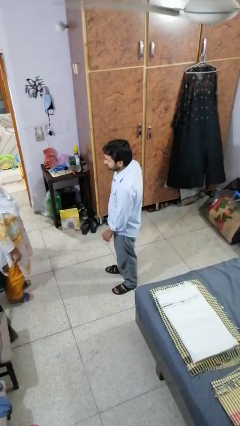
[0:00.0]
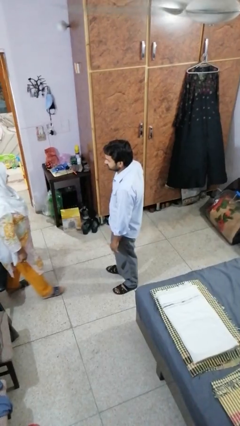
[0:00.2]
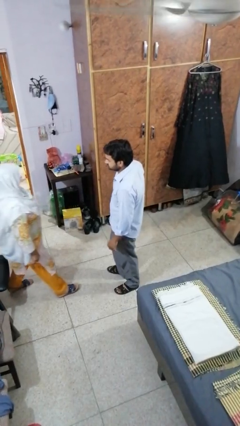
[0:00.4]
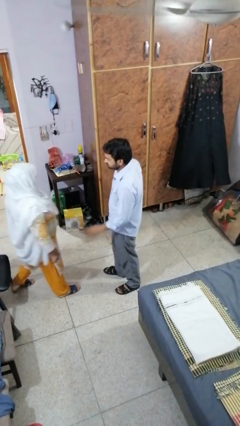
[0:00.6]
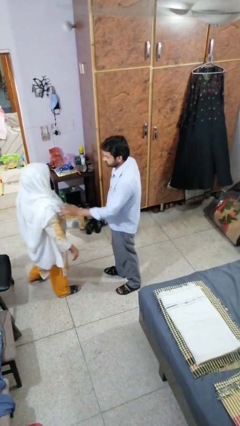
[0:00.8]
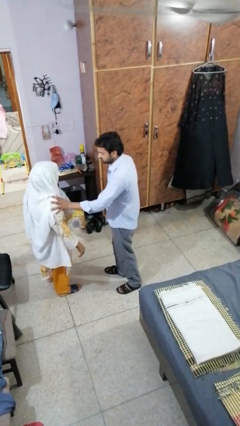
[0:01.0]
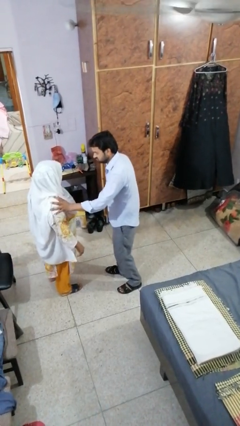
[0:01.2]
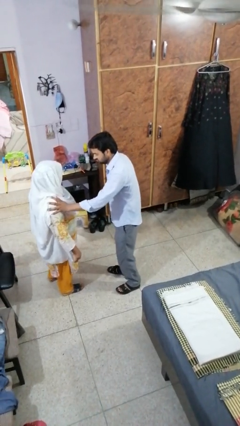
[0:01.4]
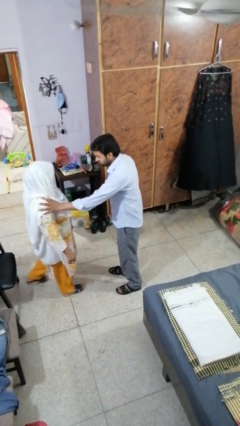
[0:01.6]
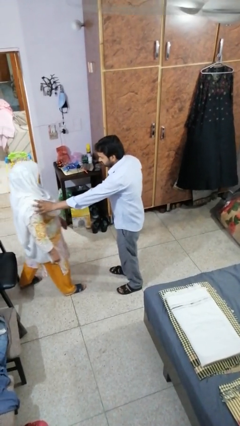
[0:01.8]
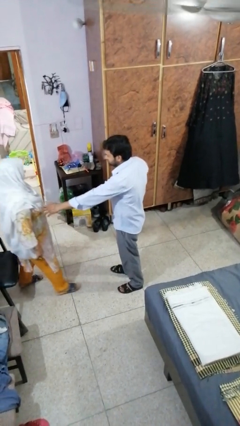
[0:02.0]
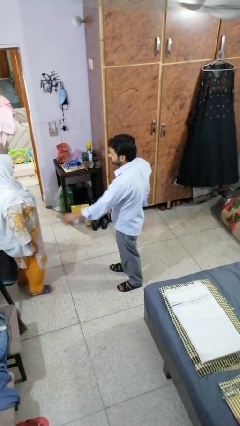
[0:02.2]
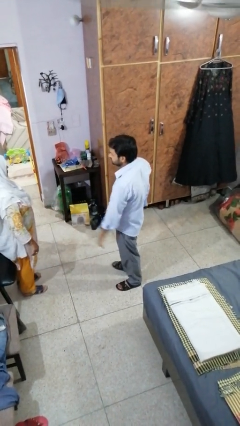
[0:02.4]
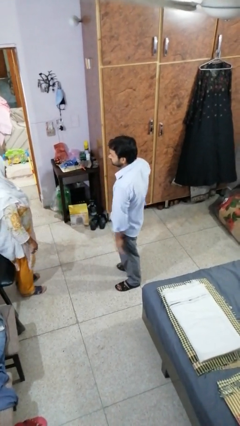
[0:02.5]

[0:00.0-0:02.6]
person shoves person

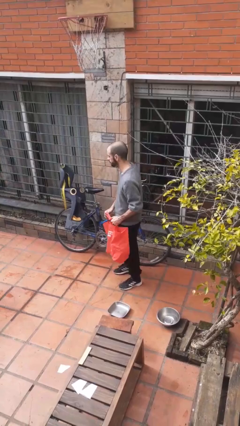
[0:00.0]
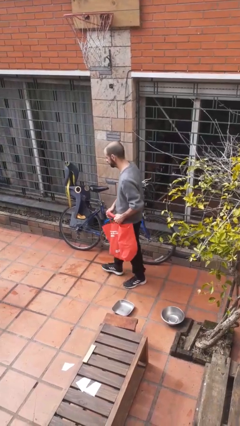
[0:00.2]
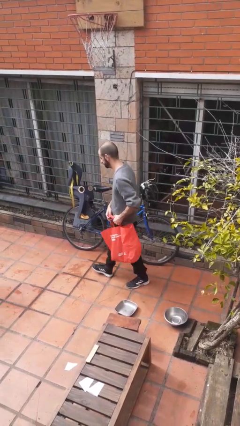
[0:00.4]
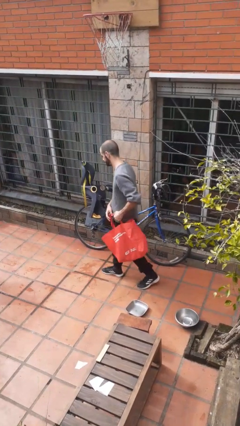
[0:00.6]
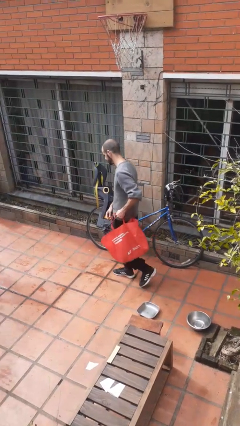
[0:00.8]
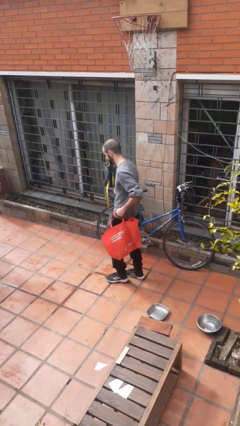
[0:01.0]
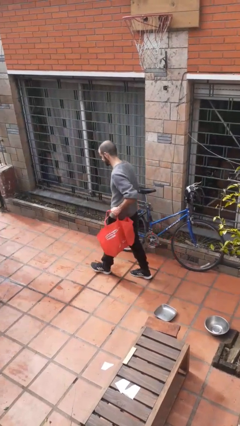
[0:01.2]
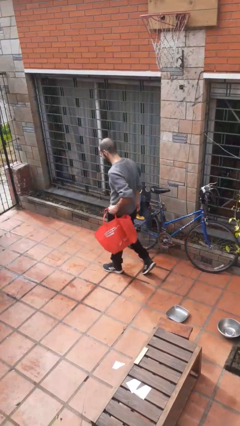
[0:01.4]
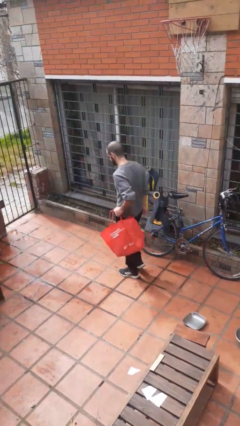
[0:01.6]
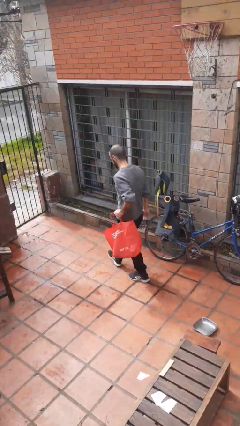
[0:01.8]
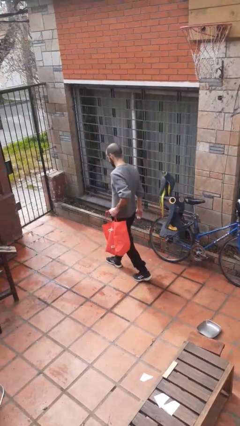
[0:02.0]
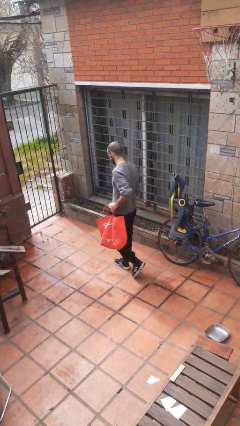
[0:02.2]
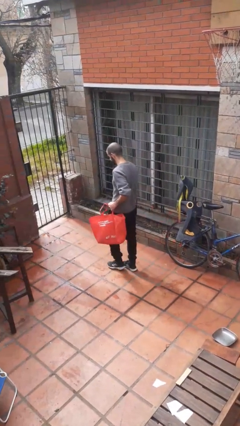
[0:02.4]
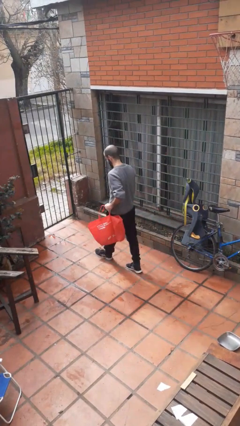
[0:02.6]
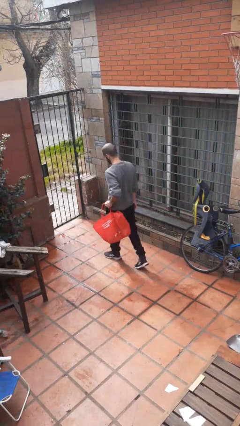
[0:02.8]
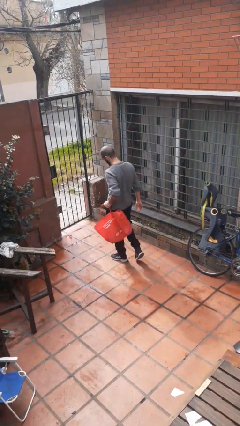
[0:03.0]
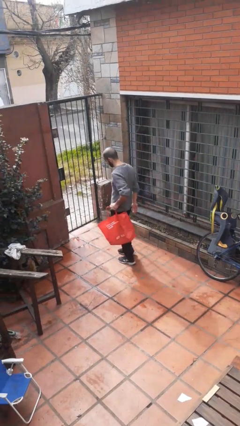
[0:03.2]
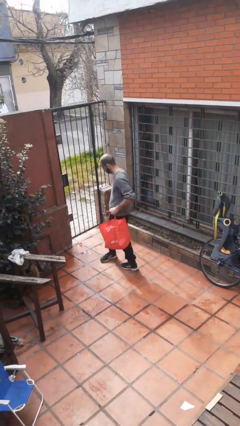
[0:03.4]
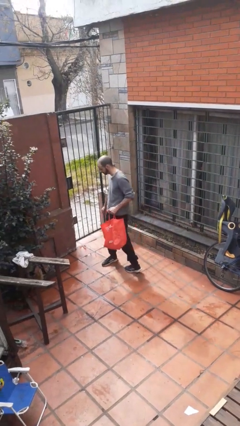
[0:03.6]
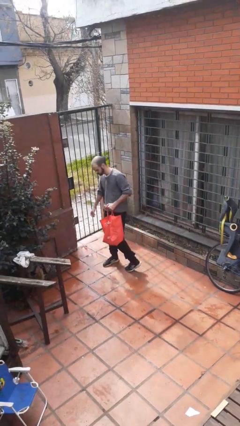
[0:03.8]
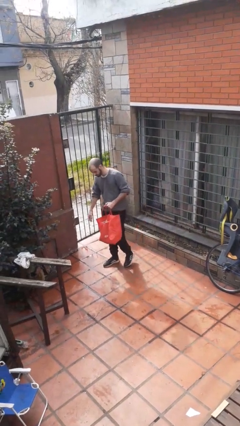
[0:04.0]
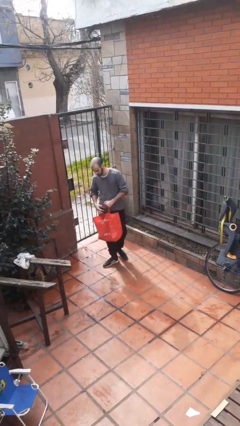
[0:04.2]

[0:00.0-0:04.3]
person carries groceries

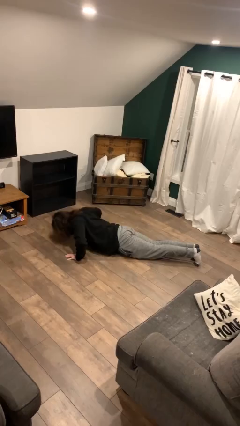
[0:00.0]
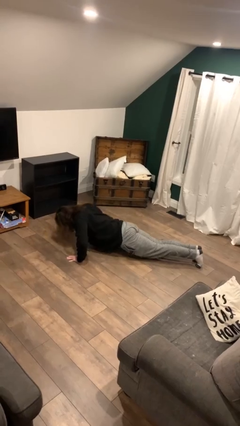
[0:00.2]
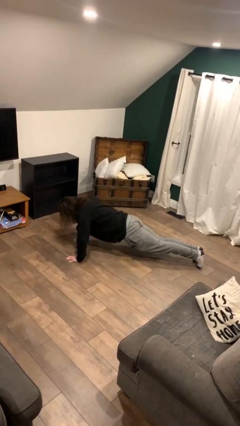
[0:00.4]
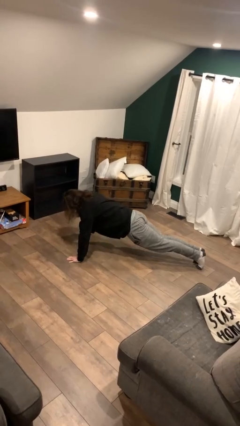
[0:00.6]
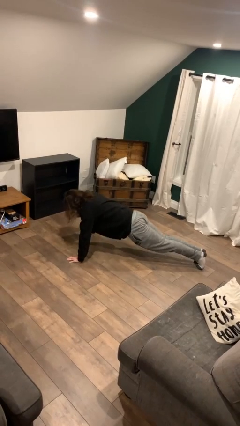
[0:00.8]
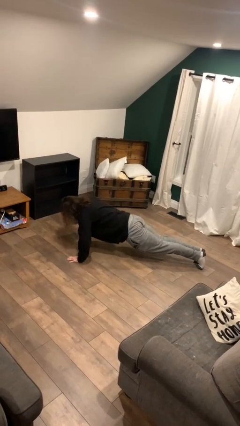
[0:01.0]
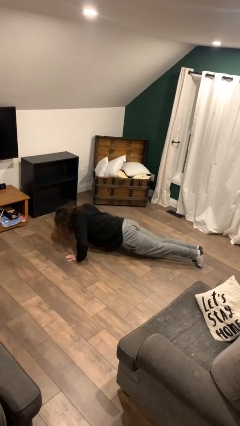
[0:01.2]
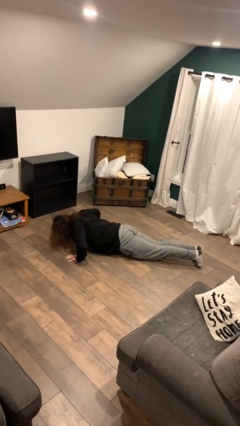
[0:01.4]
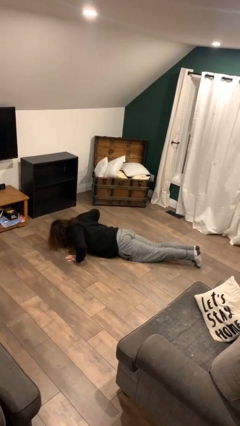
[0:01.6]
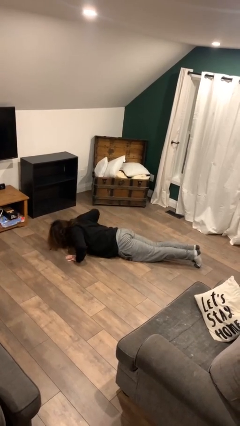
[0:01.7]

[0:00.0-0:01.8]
person exercises with pushup

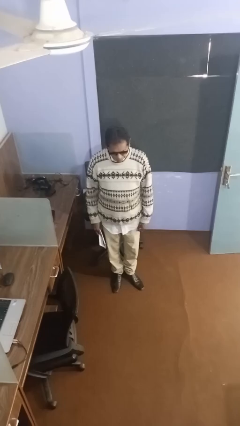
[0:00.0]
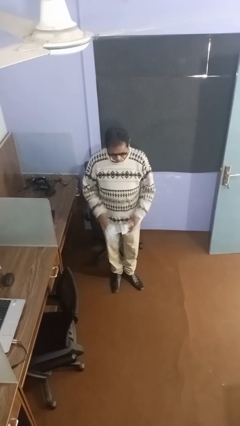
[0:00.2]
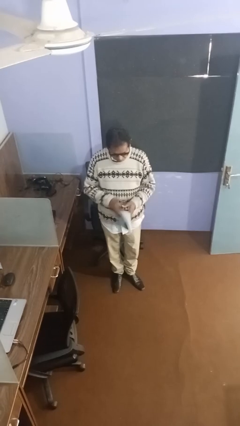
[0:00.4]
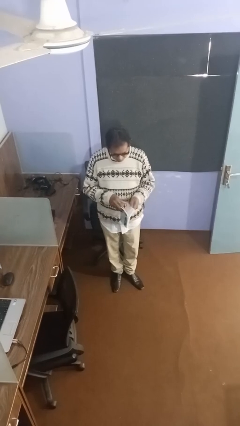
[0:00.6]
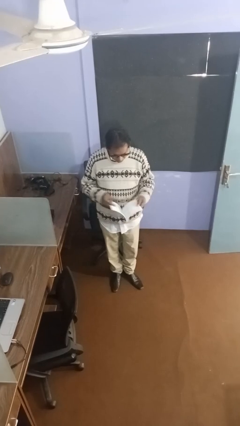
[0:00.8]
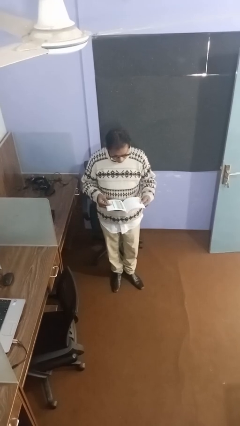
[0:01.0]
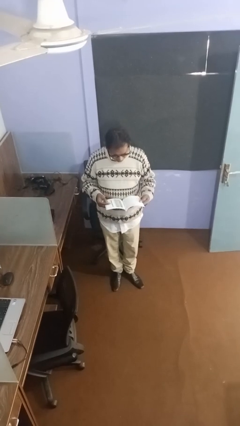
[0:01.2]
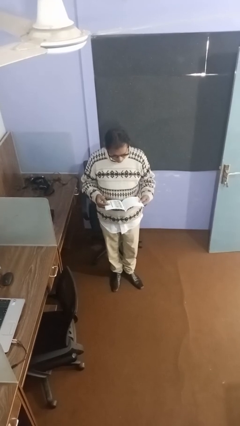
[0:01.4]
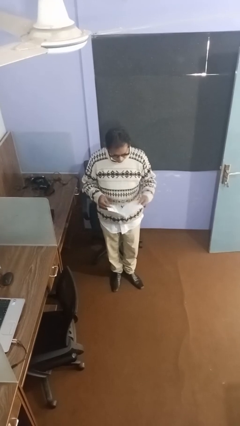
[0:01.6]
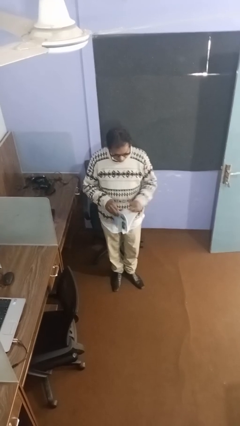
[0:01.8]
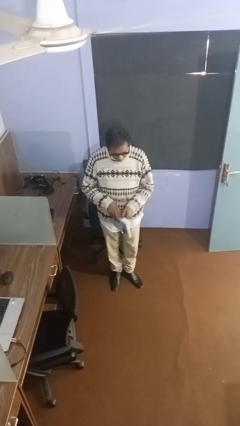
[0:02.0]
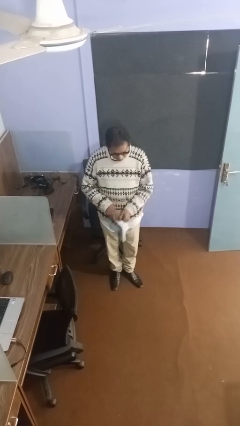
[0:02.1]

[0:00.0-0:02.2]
person reads document

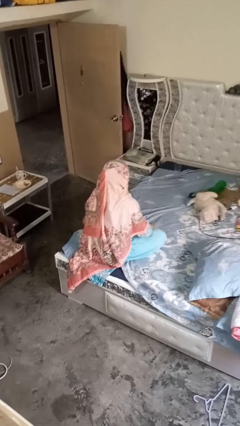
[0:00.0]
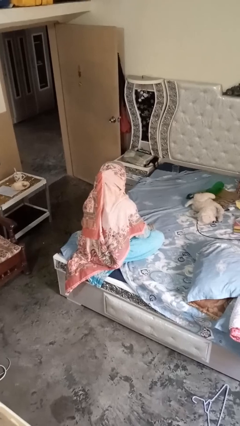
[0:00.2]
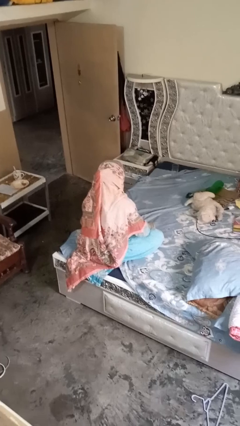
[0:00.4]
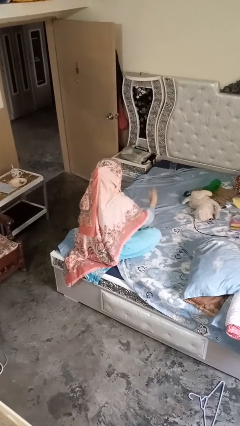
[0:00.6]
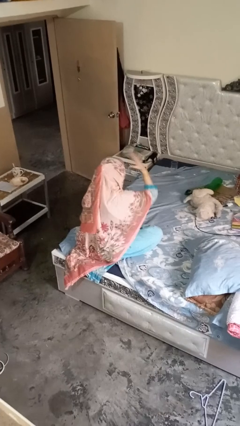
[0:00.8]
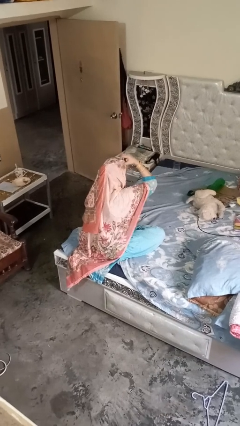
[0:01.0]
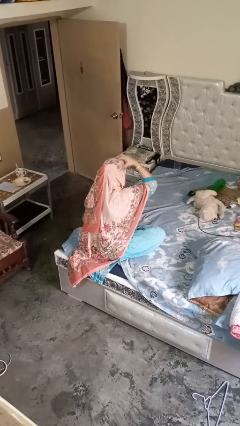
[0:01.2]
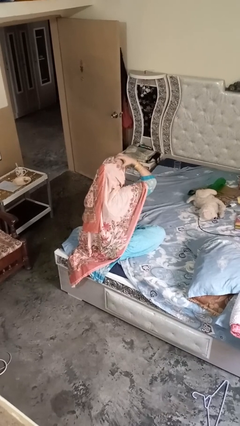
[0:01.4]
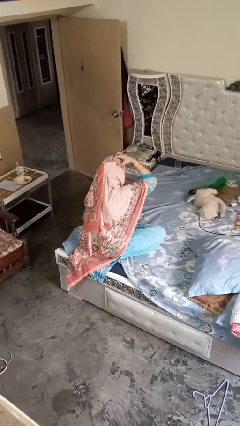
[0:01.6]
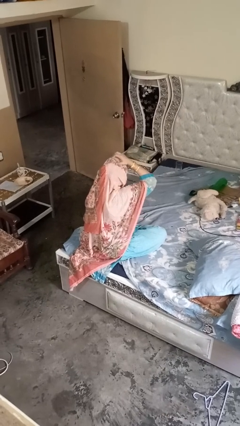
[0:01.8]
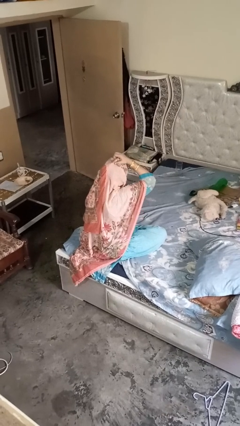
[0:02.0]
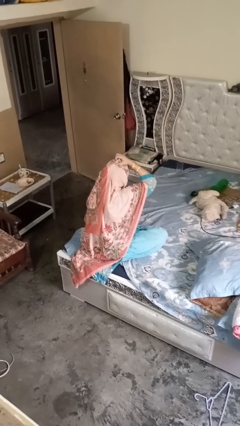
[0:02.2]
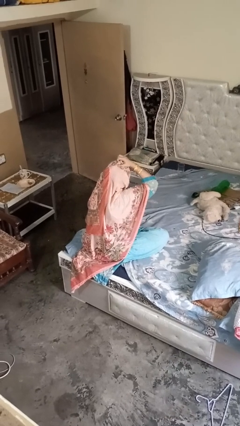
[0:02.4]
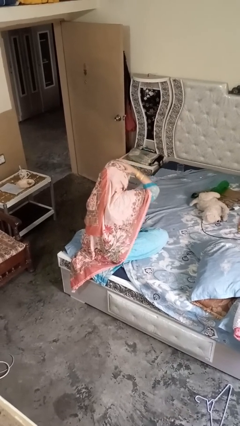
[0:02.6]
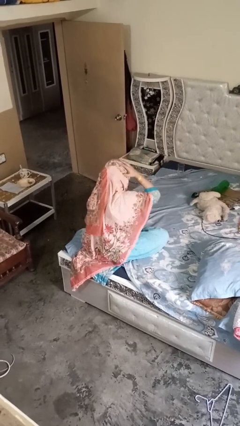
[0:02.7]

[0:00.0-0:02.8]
person strokes hair

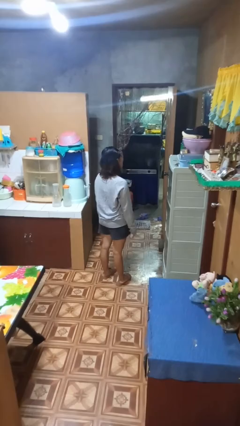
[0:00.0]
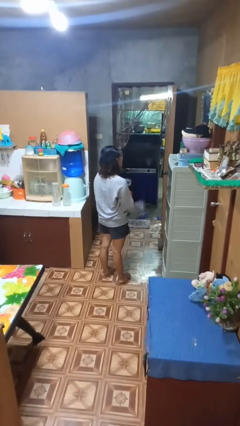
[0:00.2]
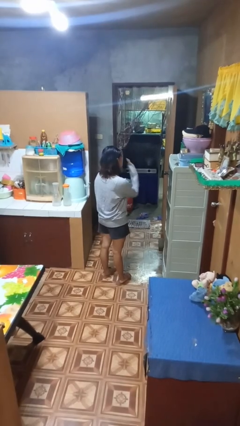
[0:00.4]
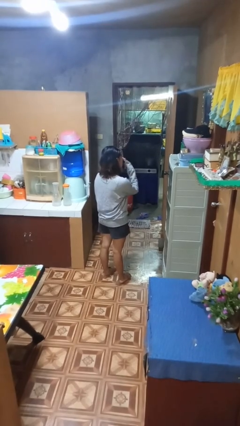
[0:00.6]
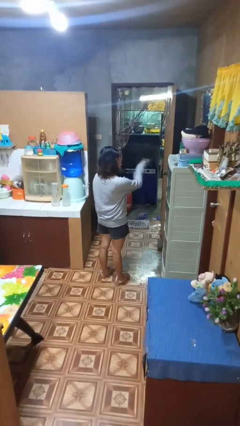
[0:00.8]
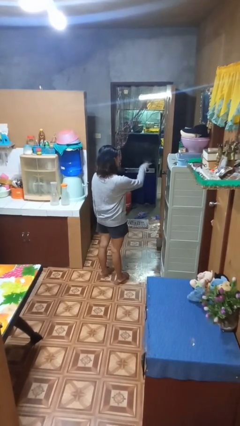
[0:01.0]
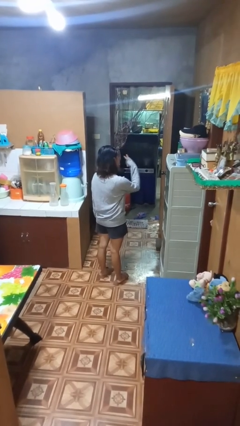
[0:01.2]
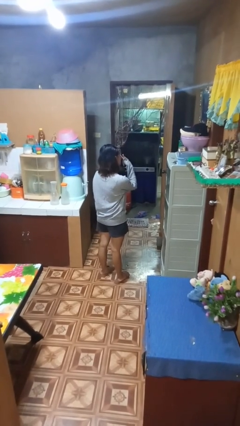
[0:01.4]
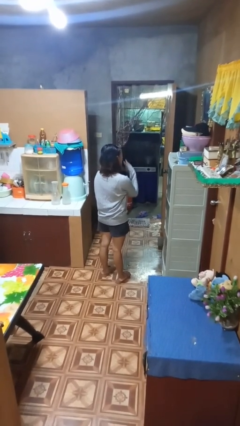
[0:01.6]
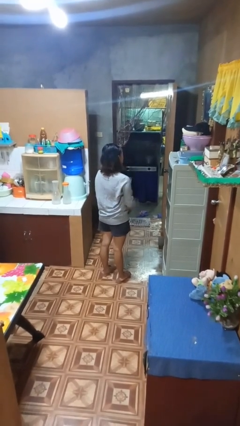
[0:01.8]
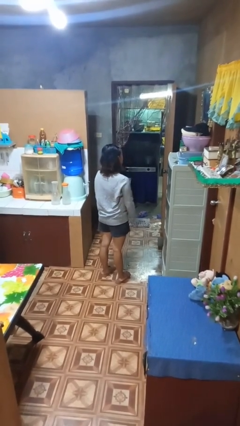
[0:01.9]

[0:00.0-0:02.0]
person gestures watch closely

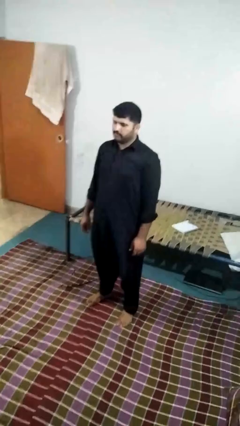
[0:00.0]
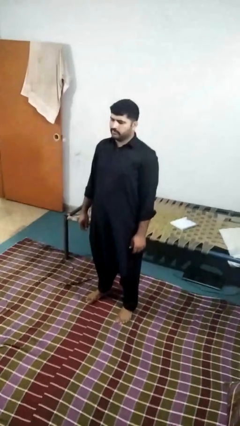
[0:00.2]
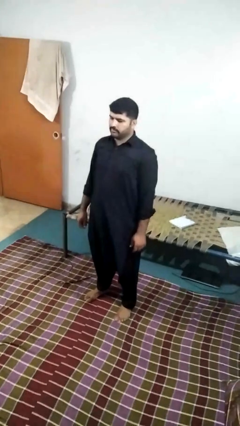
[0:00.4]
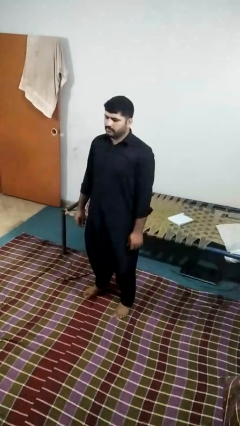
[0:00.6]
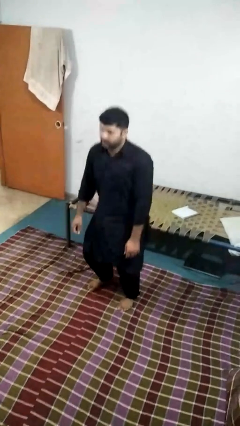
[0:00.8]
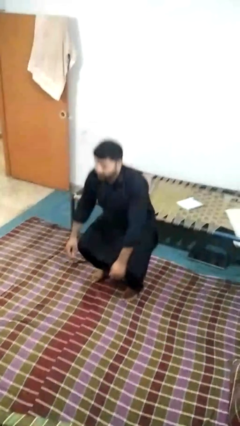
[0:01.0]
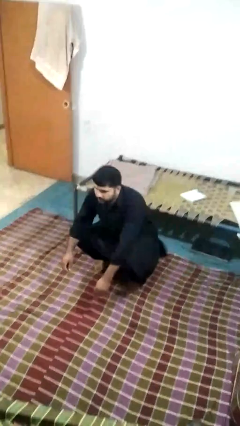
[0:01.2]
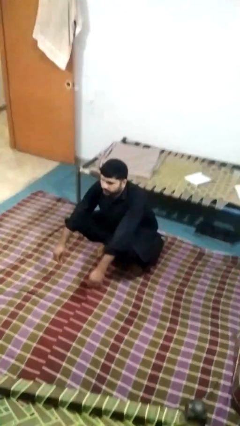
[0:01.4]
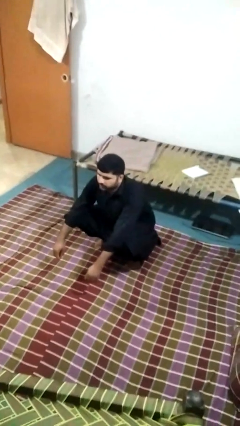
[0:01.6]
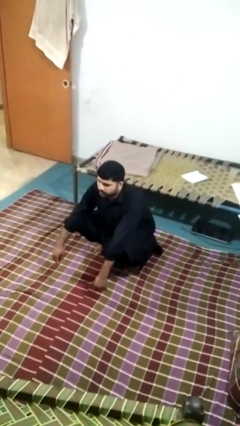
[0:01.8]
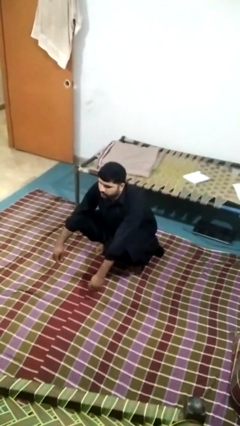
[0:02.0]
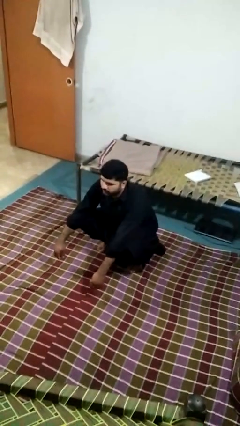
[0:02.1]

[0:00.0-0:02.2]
person squats
